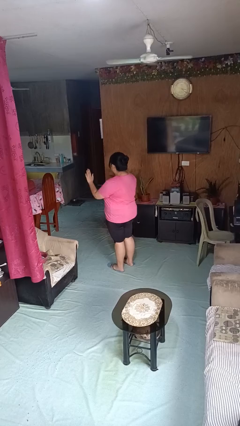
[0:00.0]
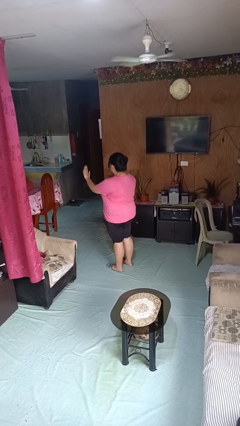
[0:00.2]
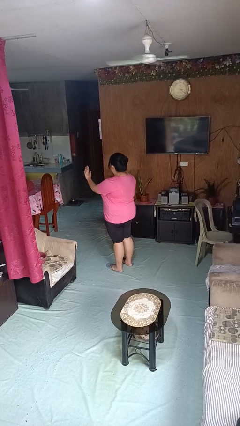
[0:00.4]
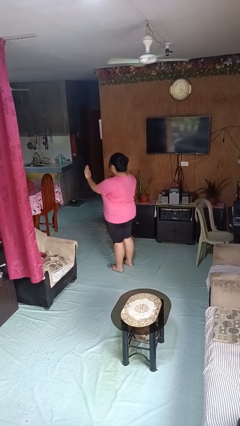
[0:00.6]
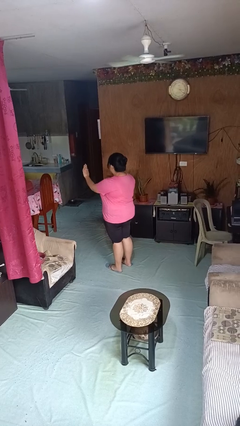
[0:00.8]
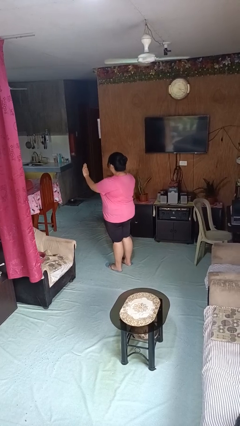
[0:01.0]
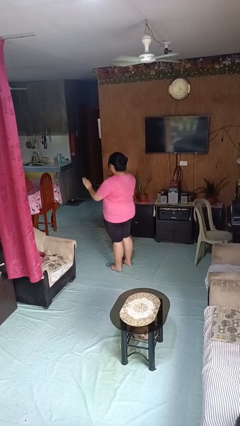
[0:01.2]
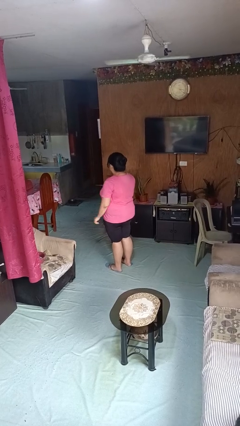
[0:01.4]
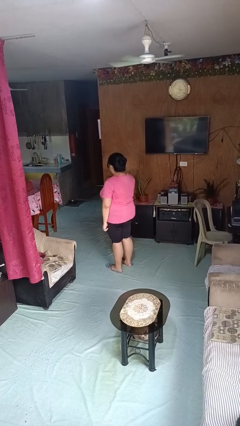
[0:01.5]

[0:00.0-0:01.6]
person gestures stop

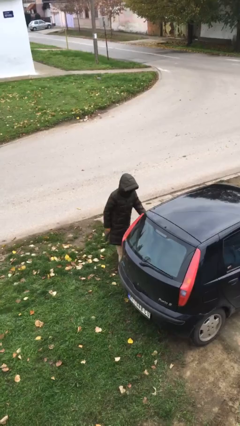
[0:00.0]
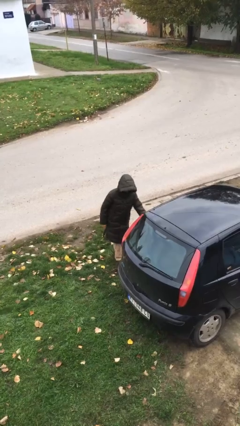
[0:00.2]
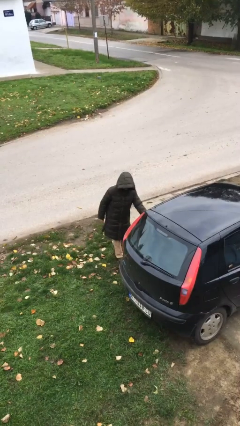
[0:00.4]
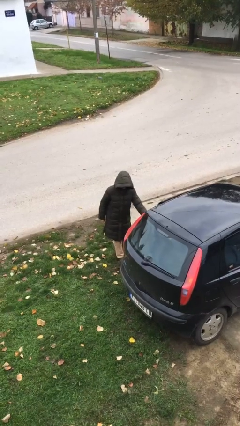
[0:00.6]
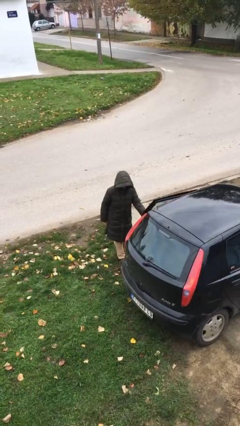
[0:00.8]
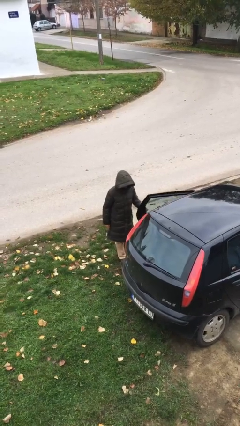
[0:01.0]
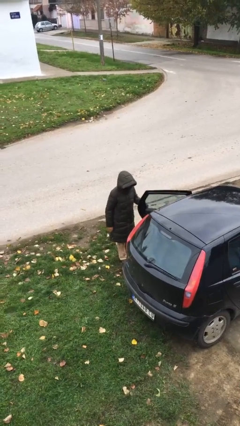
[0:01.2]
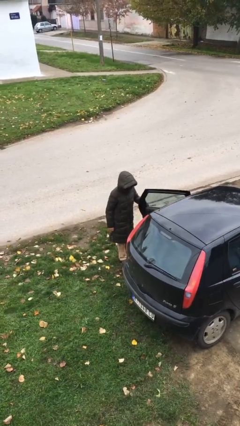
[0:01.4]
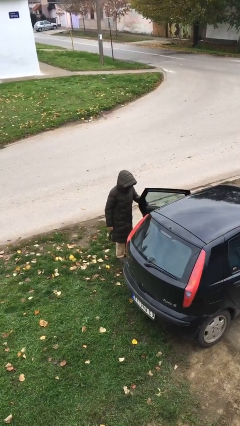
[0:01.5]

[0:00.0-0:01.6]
person opens car door

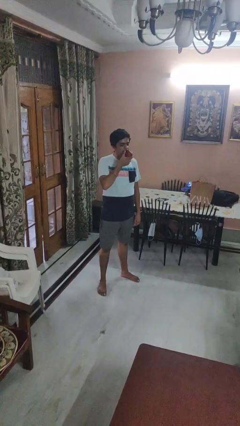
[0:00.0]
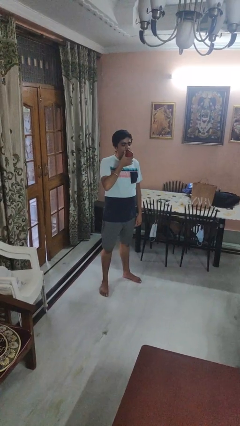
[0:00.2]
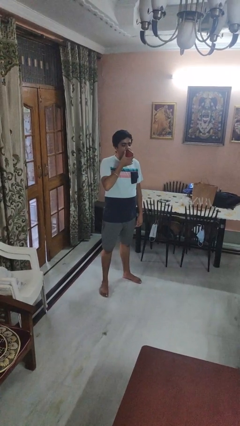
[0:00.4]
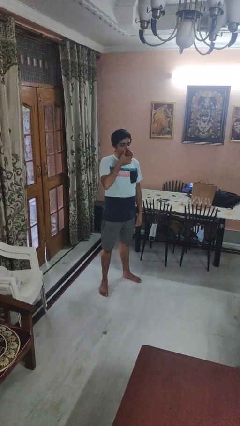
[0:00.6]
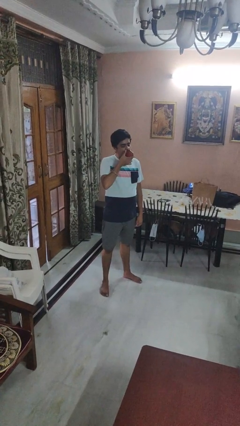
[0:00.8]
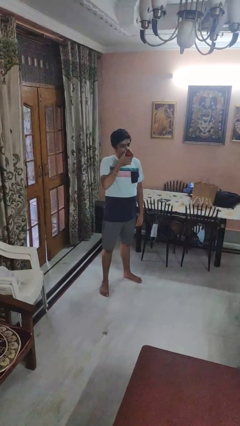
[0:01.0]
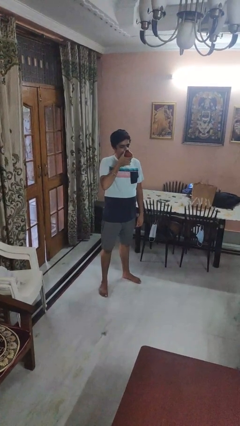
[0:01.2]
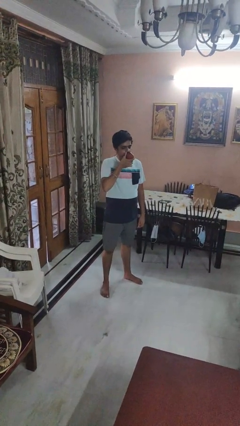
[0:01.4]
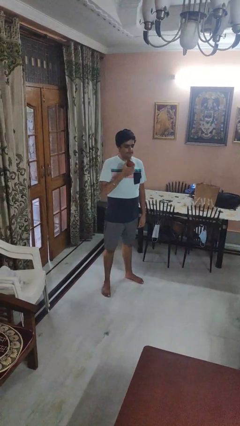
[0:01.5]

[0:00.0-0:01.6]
person eats apple

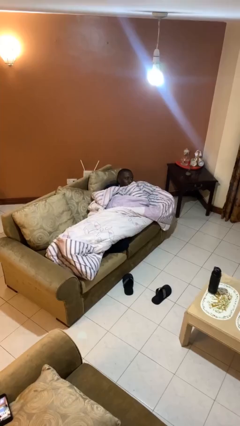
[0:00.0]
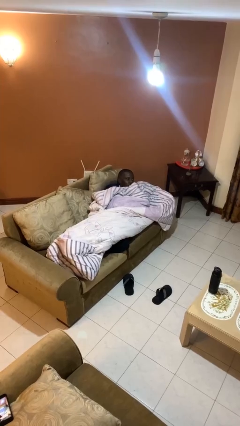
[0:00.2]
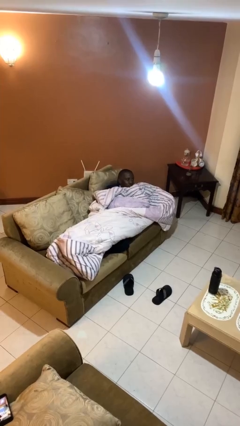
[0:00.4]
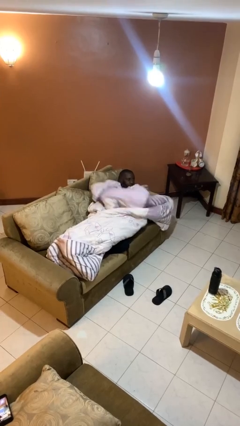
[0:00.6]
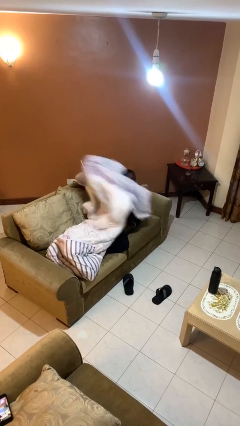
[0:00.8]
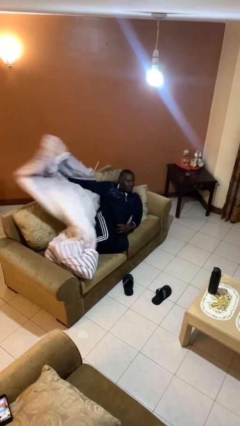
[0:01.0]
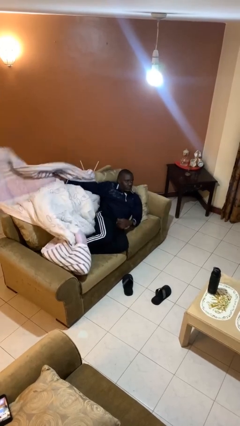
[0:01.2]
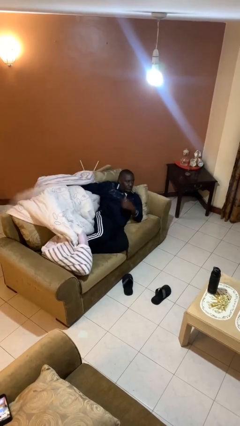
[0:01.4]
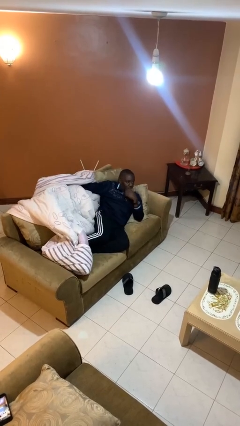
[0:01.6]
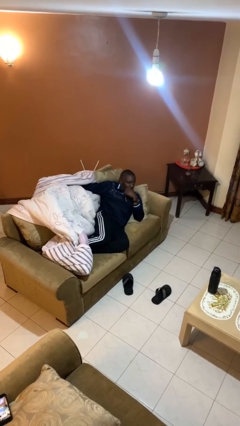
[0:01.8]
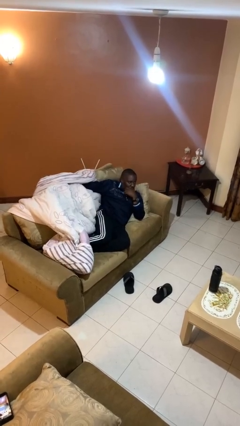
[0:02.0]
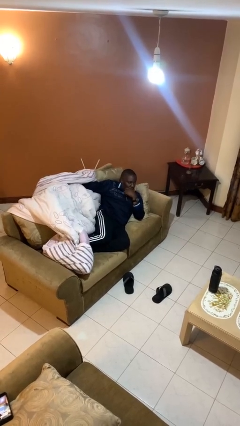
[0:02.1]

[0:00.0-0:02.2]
person uncovers with blanket

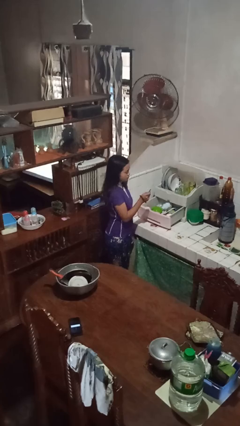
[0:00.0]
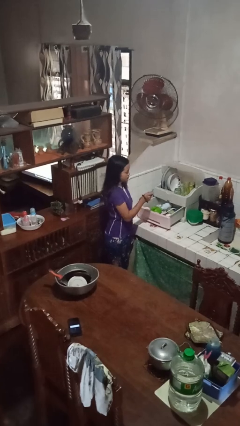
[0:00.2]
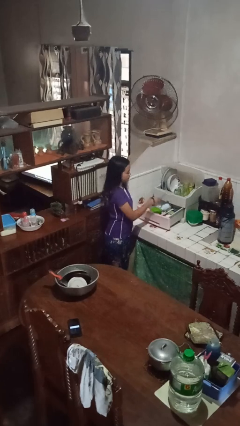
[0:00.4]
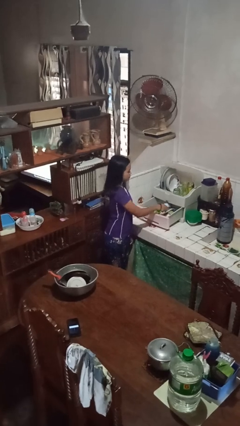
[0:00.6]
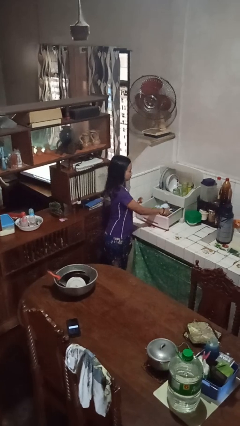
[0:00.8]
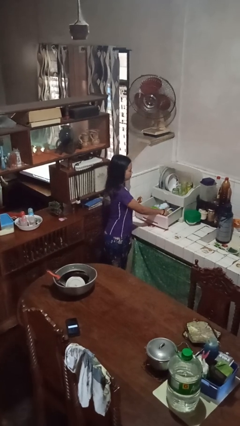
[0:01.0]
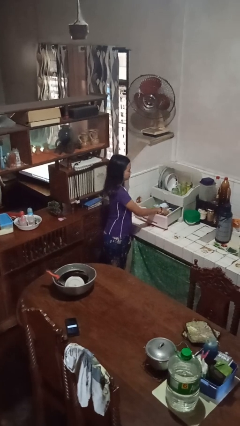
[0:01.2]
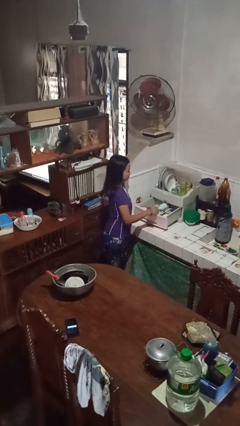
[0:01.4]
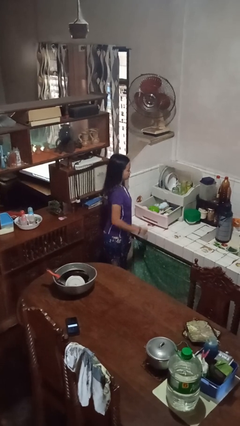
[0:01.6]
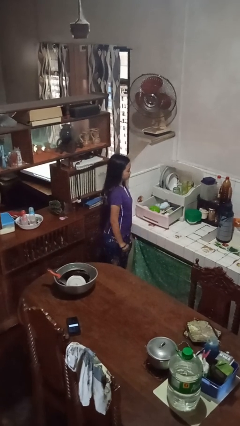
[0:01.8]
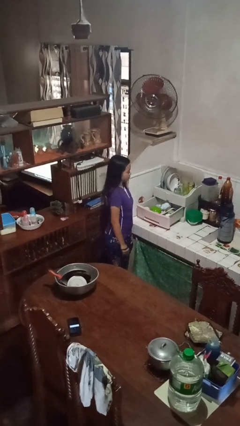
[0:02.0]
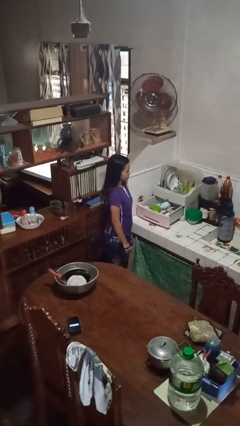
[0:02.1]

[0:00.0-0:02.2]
person puts object into kitchen drawer

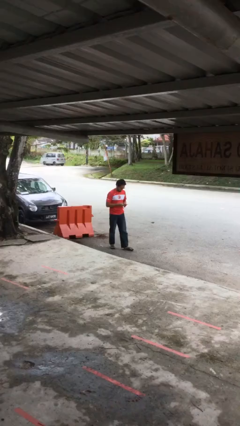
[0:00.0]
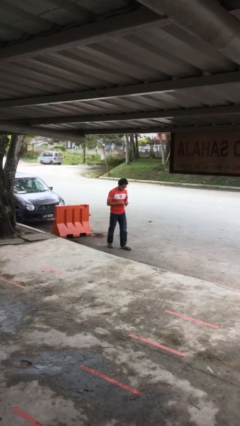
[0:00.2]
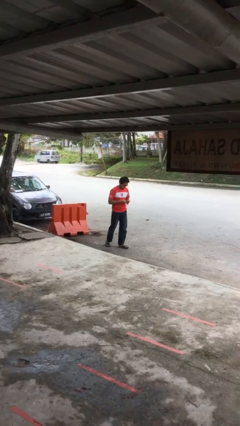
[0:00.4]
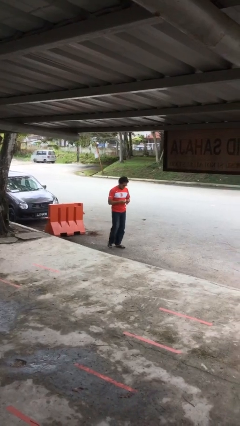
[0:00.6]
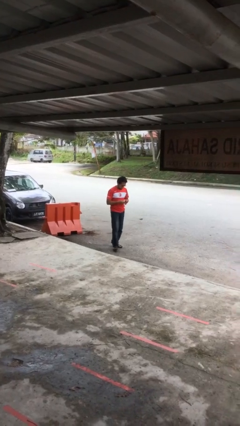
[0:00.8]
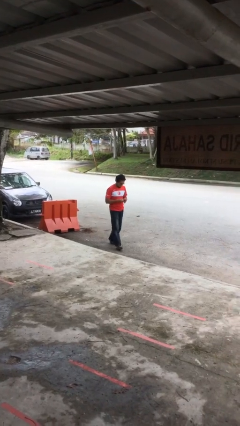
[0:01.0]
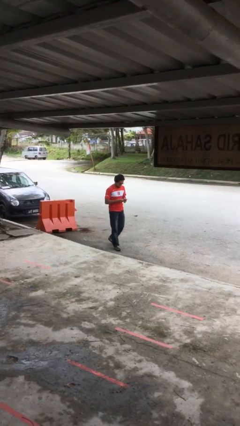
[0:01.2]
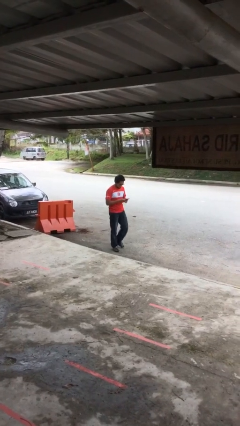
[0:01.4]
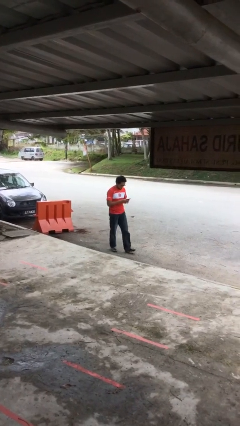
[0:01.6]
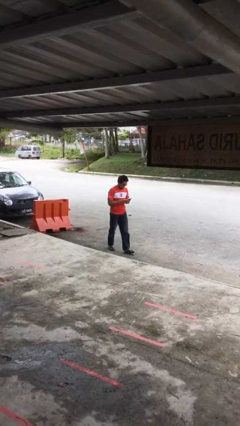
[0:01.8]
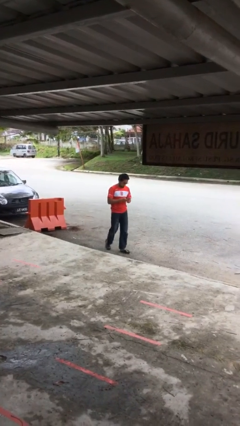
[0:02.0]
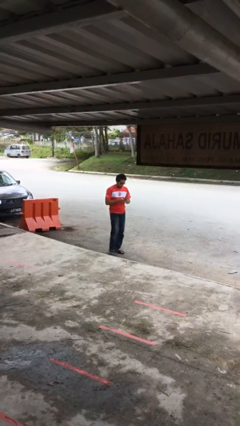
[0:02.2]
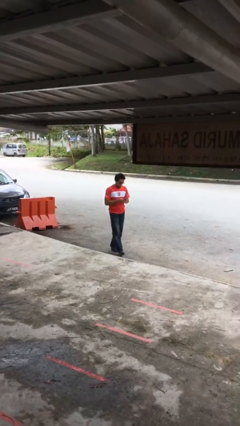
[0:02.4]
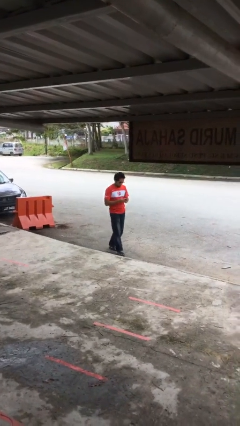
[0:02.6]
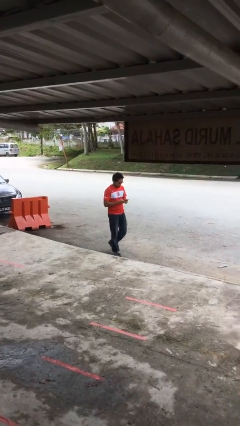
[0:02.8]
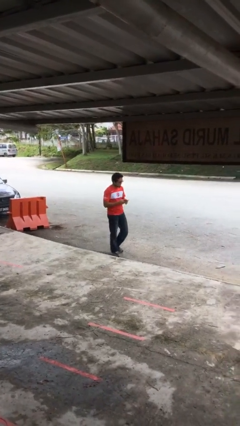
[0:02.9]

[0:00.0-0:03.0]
person texts on phone

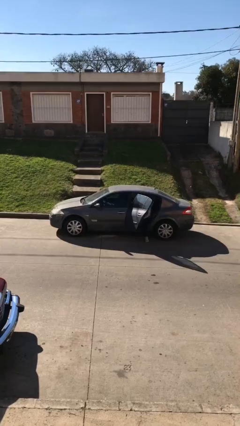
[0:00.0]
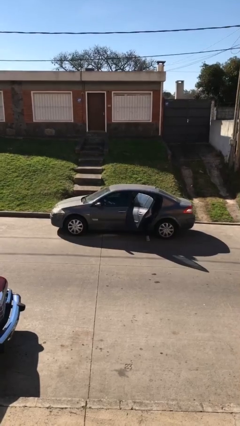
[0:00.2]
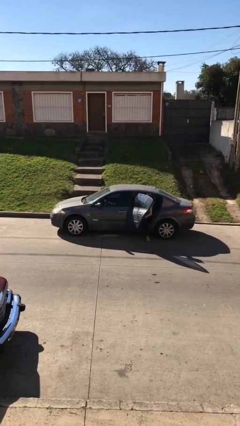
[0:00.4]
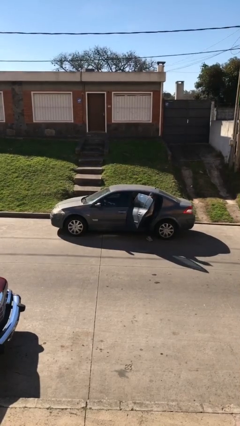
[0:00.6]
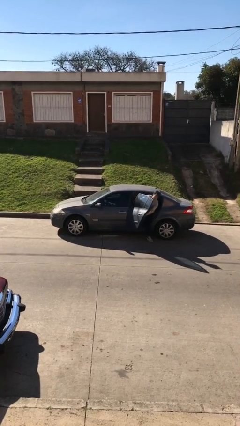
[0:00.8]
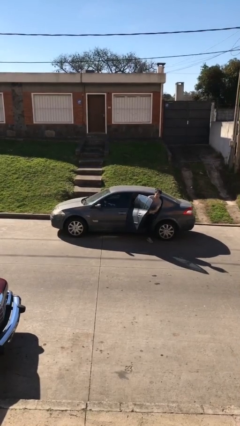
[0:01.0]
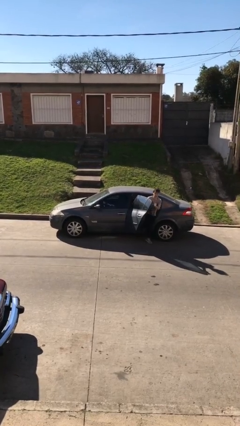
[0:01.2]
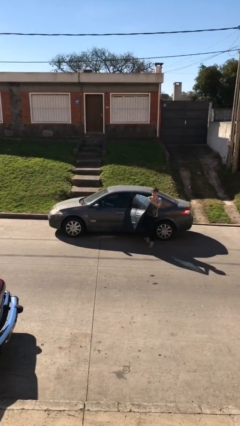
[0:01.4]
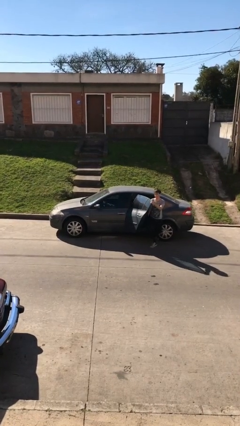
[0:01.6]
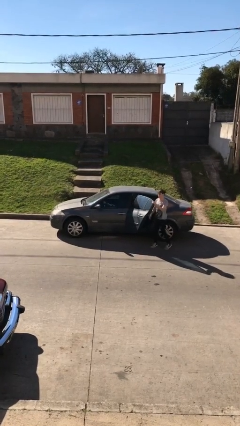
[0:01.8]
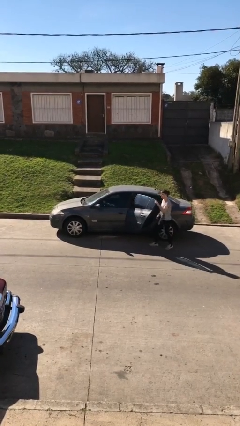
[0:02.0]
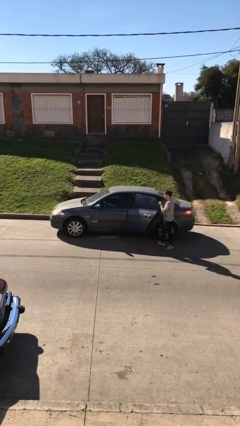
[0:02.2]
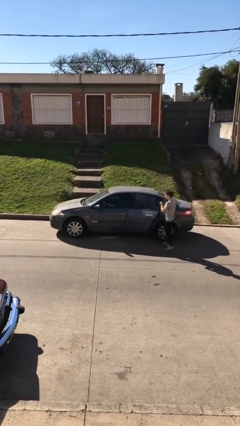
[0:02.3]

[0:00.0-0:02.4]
car drops off person

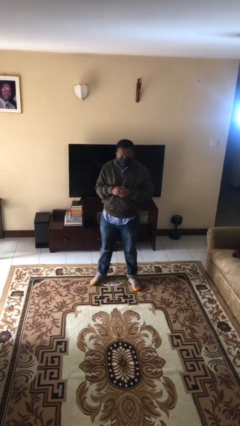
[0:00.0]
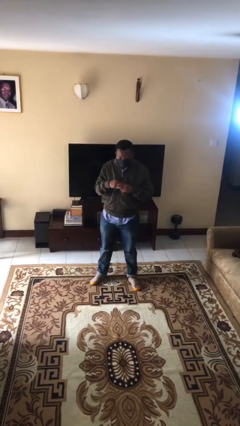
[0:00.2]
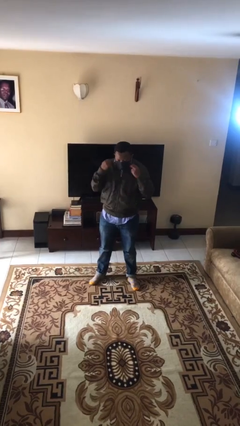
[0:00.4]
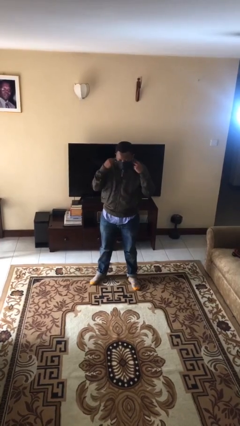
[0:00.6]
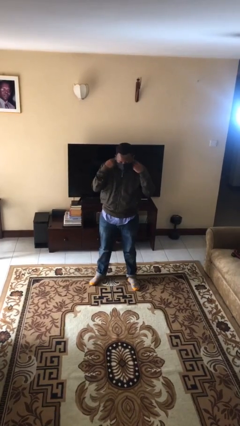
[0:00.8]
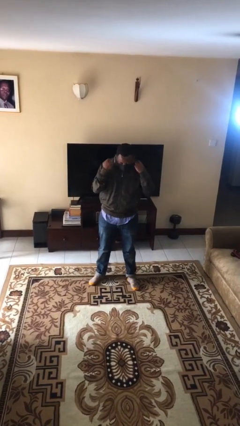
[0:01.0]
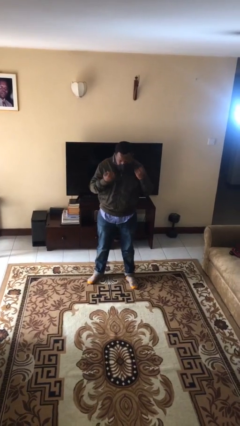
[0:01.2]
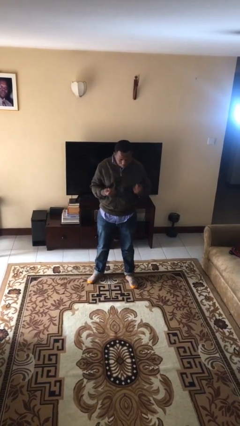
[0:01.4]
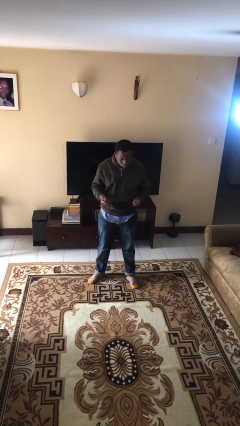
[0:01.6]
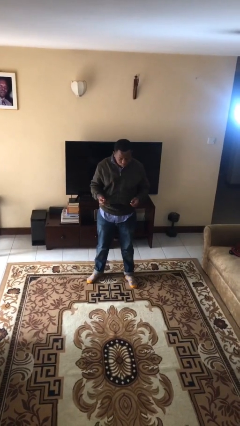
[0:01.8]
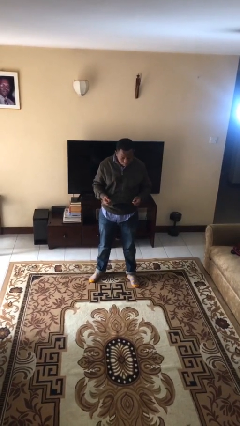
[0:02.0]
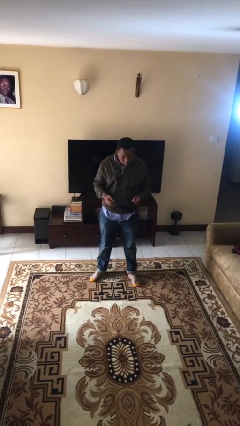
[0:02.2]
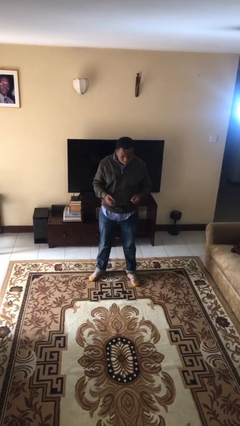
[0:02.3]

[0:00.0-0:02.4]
person takes off facemask
